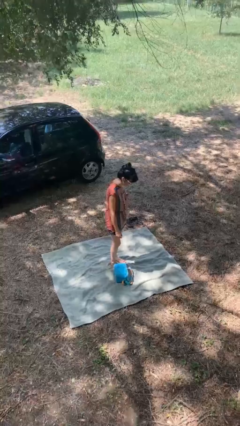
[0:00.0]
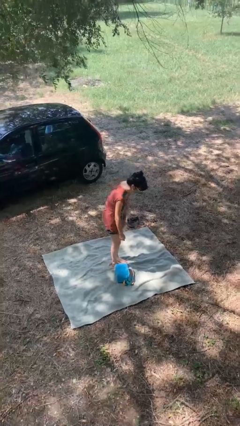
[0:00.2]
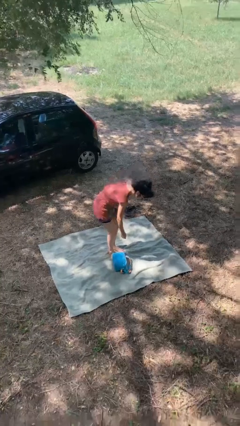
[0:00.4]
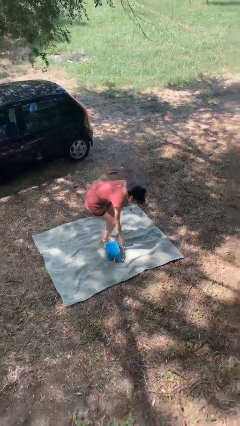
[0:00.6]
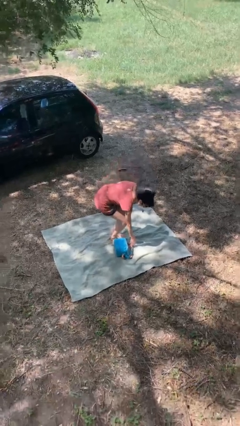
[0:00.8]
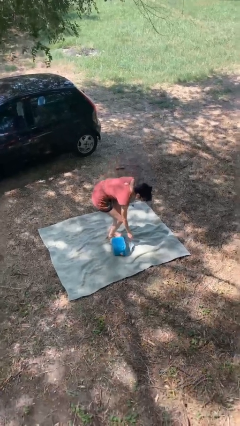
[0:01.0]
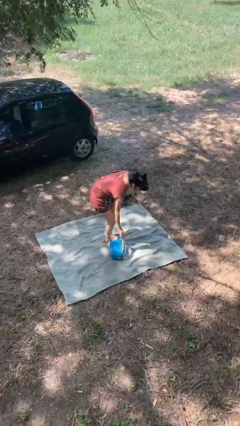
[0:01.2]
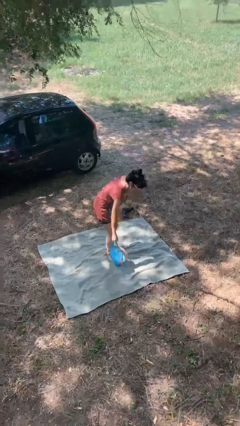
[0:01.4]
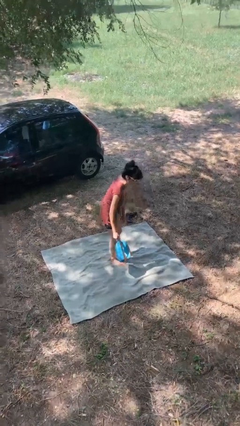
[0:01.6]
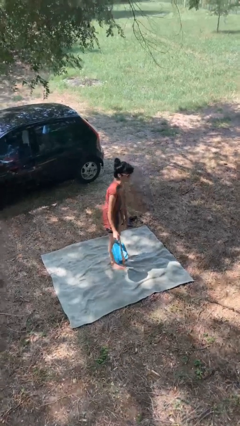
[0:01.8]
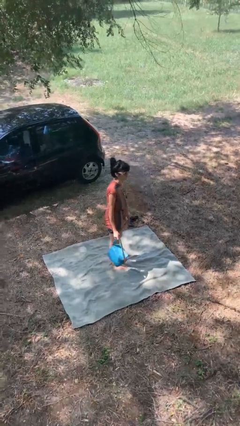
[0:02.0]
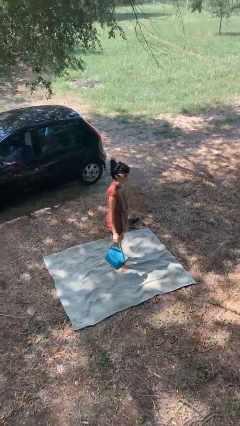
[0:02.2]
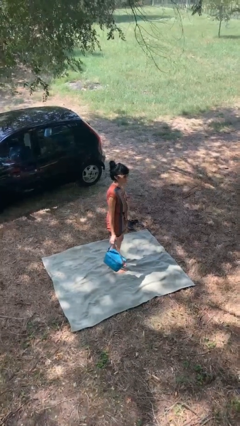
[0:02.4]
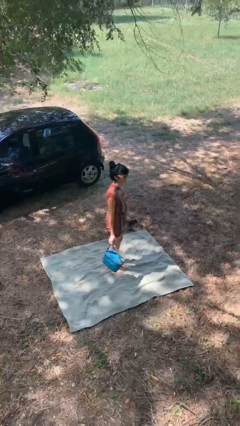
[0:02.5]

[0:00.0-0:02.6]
person picks up object from floor

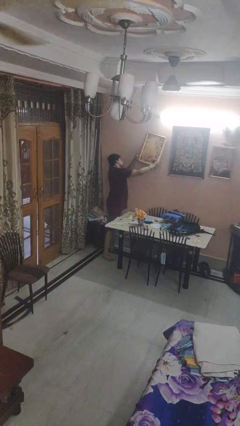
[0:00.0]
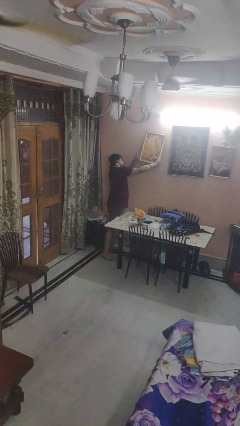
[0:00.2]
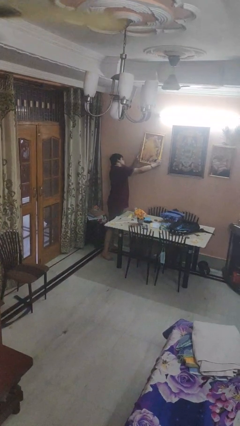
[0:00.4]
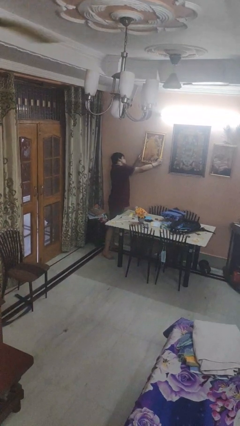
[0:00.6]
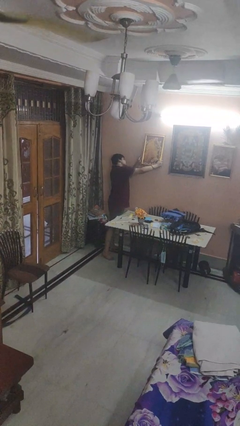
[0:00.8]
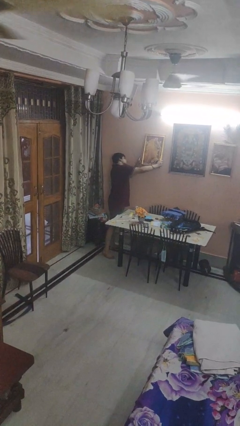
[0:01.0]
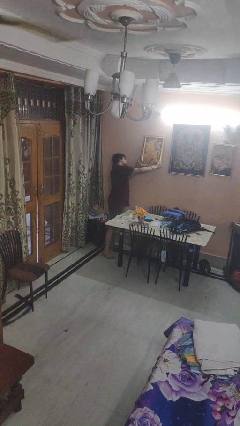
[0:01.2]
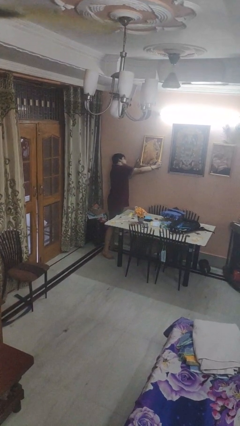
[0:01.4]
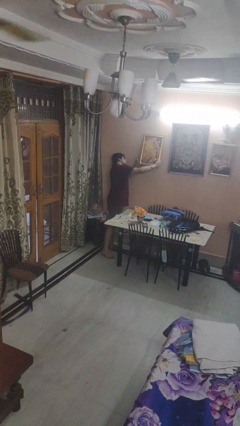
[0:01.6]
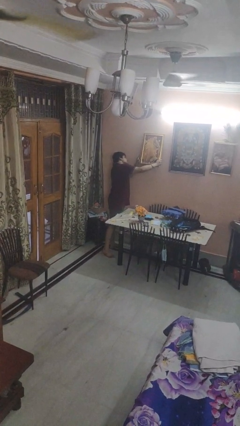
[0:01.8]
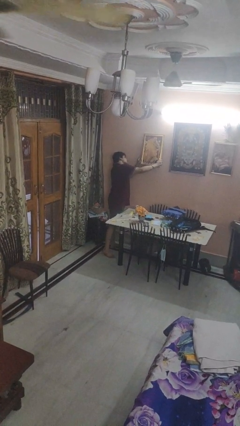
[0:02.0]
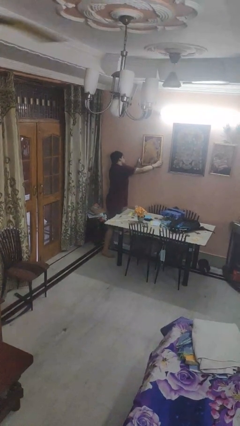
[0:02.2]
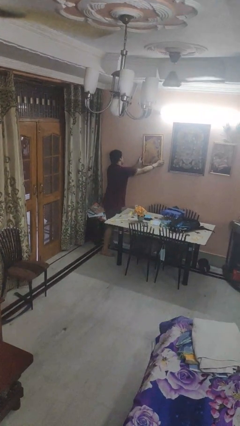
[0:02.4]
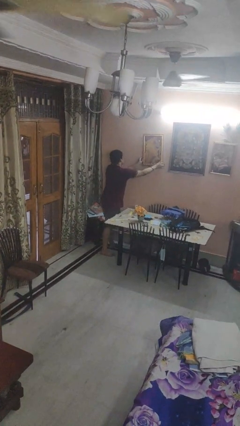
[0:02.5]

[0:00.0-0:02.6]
person puts up picture frame

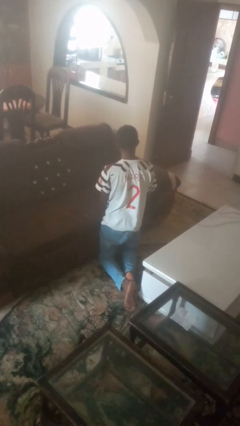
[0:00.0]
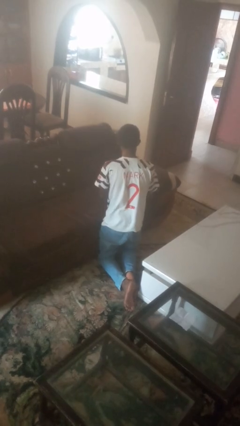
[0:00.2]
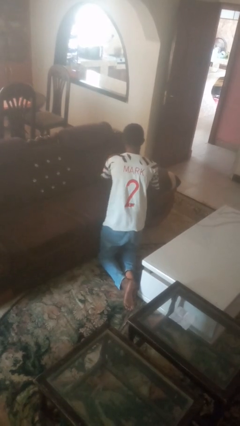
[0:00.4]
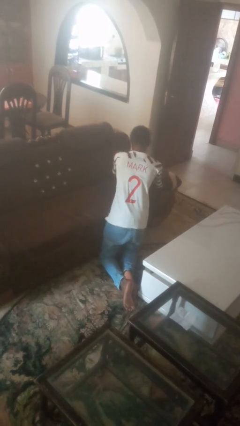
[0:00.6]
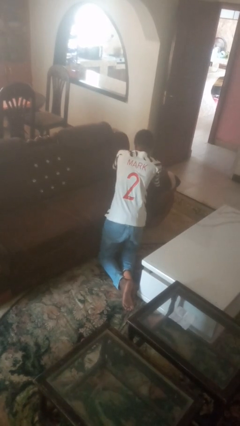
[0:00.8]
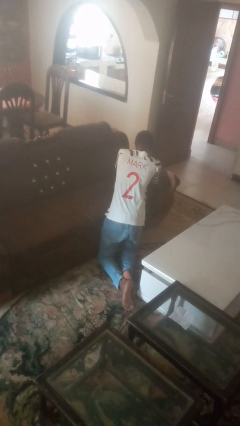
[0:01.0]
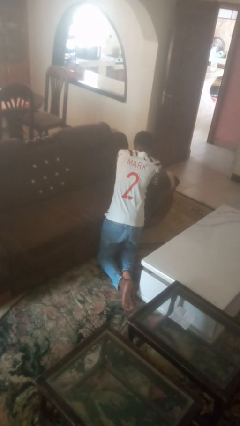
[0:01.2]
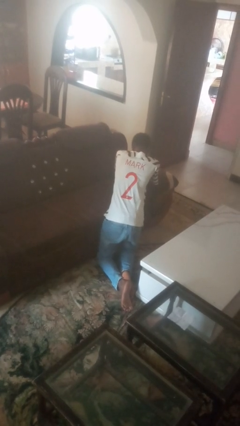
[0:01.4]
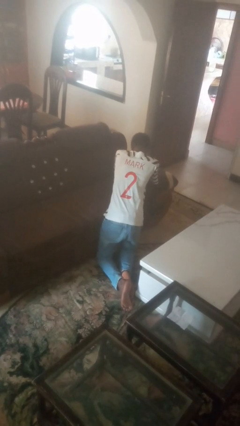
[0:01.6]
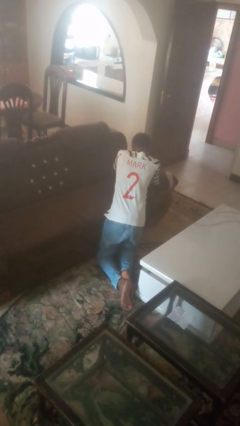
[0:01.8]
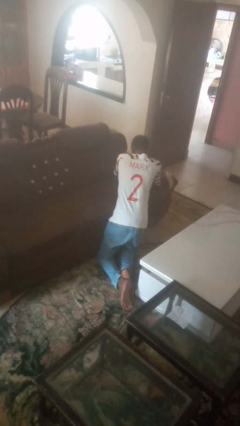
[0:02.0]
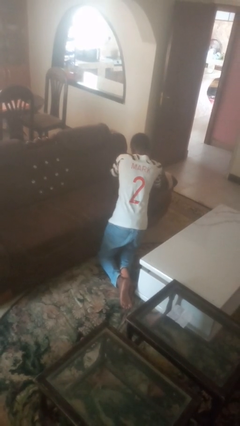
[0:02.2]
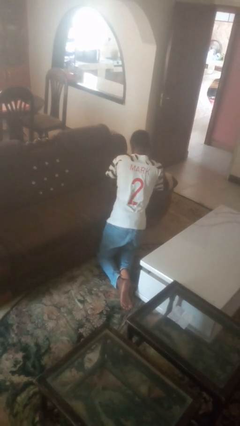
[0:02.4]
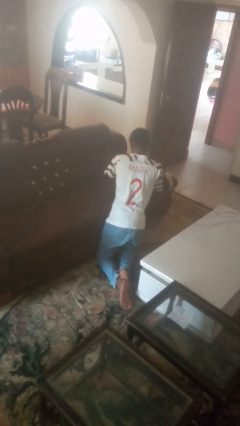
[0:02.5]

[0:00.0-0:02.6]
person searches in couch

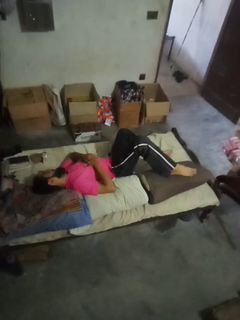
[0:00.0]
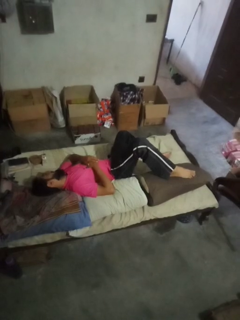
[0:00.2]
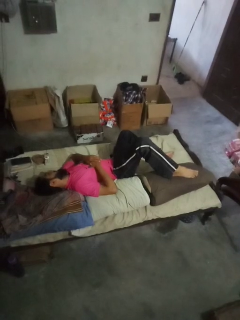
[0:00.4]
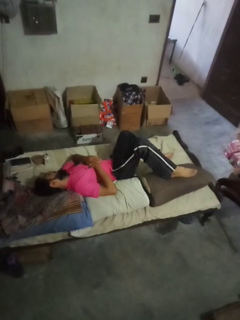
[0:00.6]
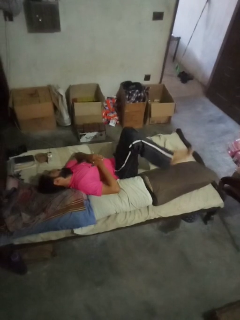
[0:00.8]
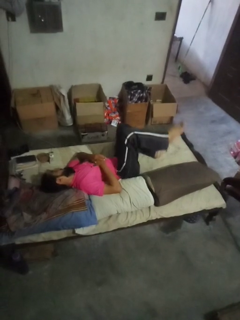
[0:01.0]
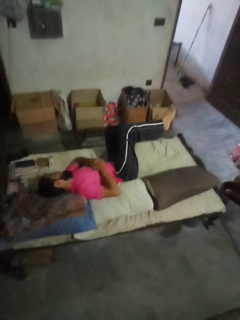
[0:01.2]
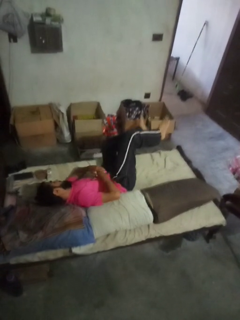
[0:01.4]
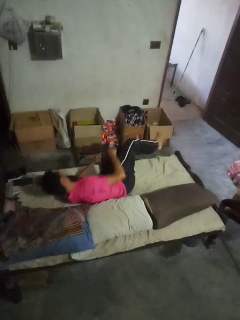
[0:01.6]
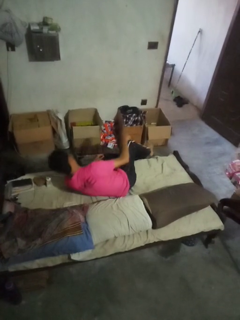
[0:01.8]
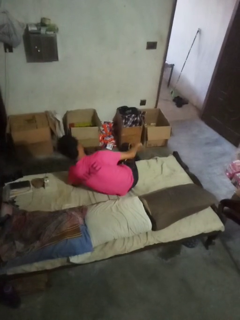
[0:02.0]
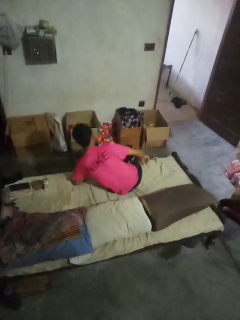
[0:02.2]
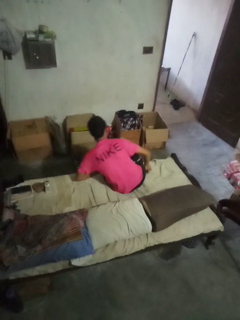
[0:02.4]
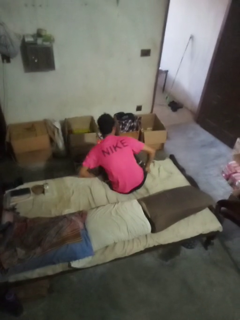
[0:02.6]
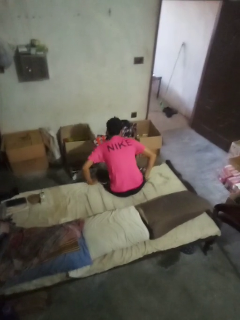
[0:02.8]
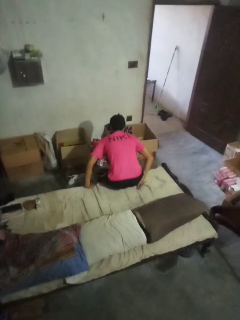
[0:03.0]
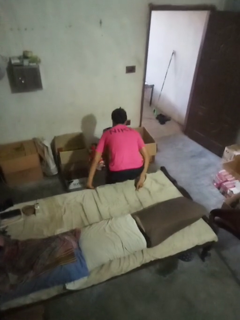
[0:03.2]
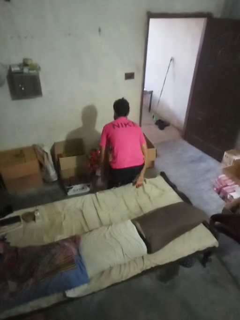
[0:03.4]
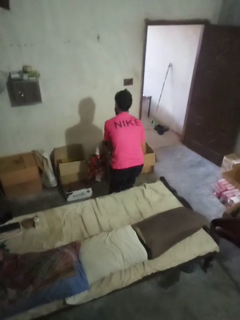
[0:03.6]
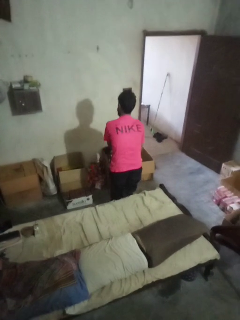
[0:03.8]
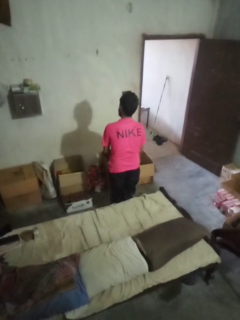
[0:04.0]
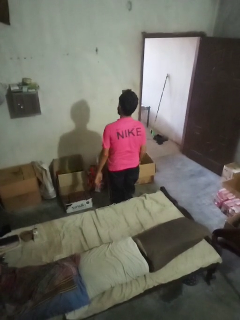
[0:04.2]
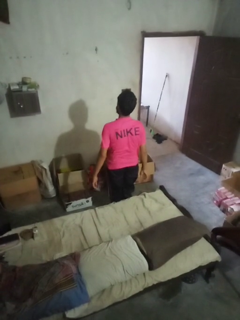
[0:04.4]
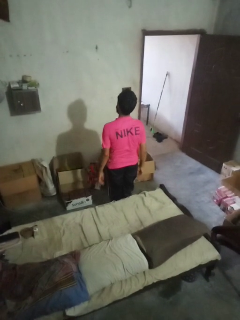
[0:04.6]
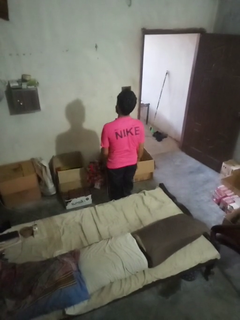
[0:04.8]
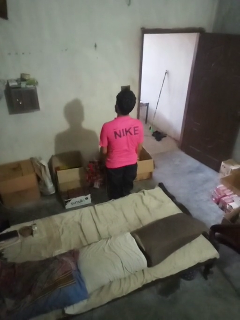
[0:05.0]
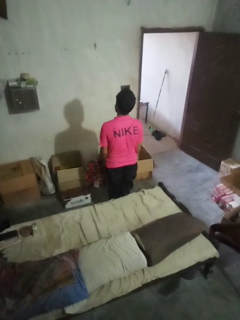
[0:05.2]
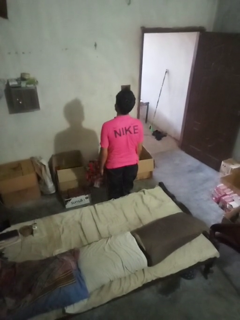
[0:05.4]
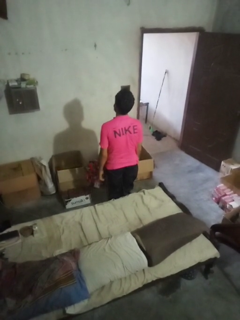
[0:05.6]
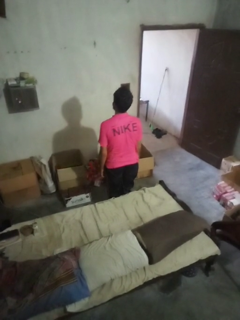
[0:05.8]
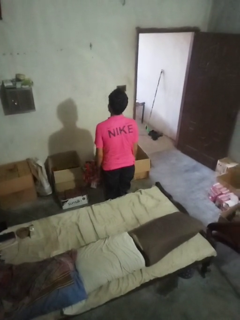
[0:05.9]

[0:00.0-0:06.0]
person stands up

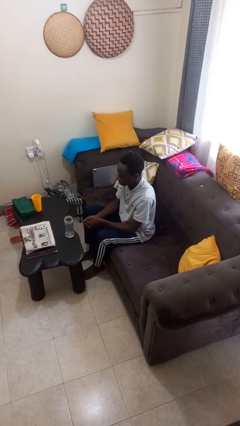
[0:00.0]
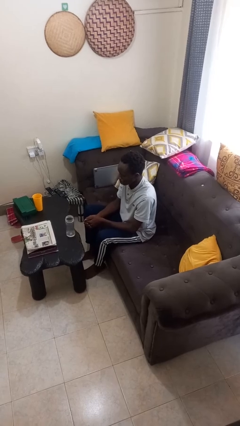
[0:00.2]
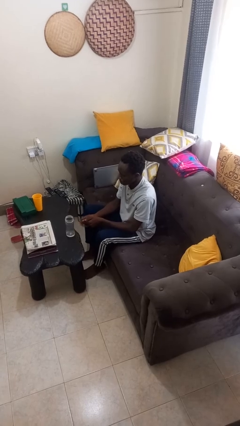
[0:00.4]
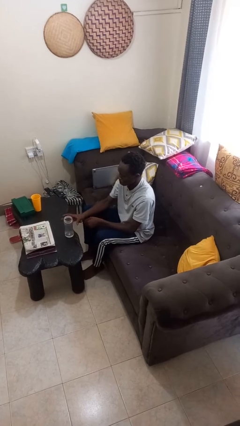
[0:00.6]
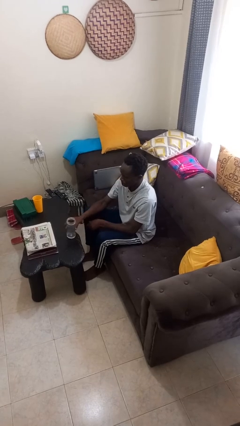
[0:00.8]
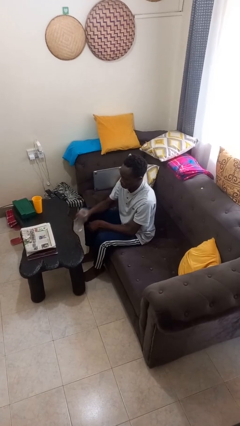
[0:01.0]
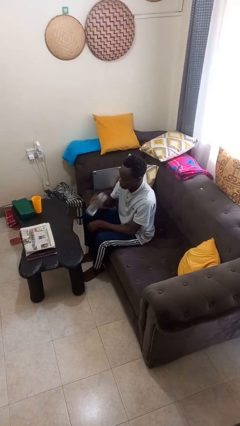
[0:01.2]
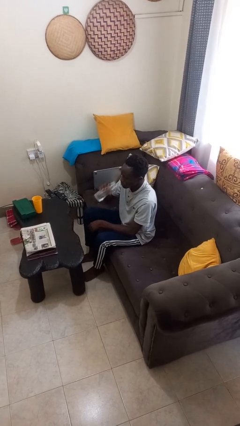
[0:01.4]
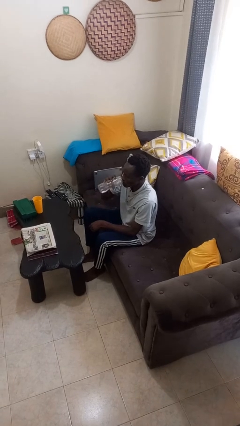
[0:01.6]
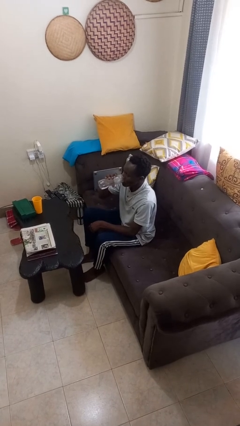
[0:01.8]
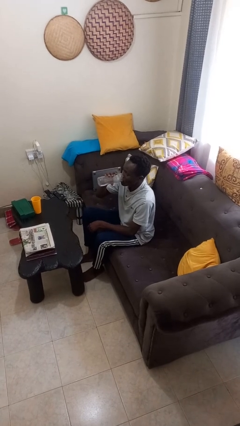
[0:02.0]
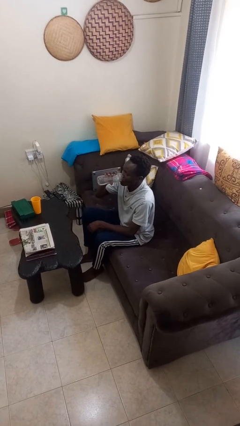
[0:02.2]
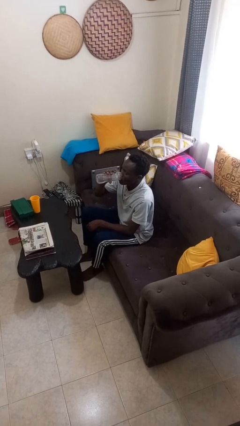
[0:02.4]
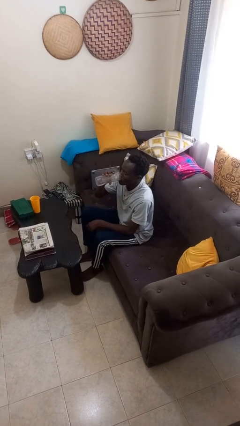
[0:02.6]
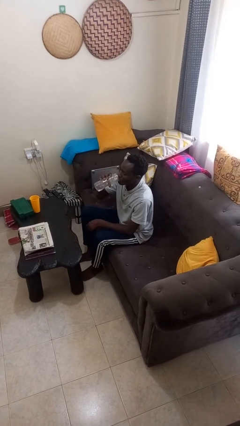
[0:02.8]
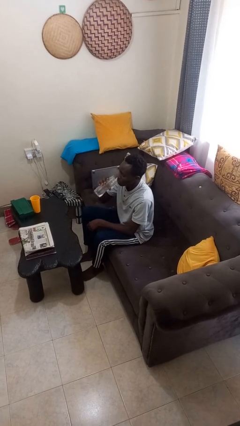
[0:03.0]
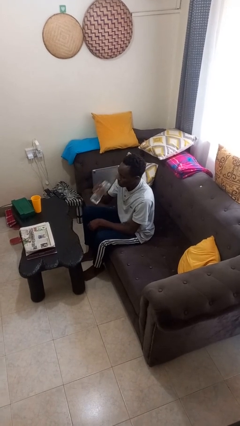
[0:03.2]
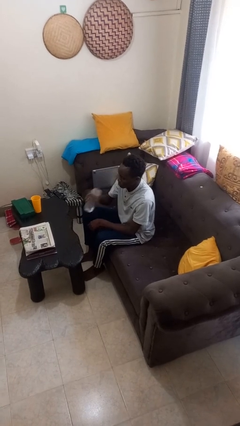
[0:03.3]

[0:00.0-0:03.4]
person drinks from bottle

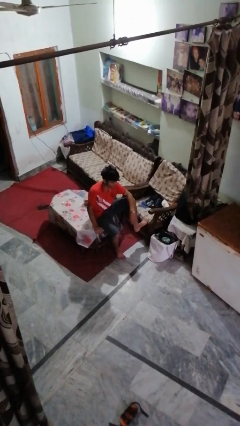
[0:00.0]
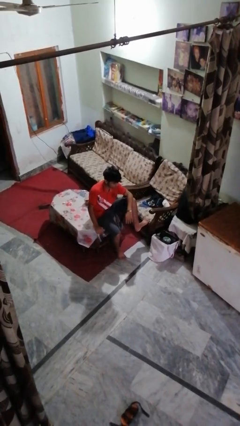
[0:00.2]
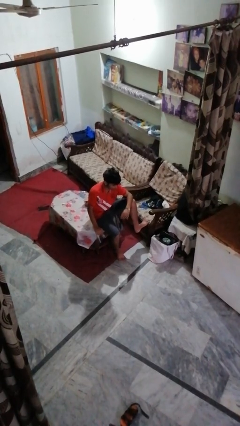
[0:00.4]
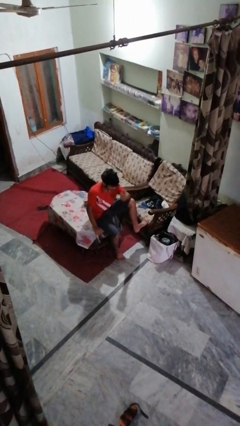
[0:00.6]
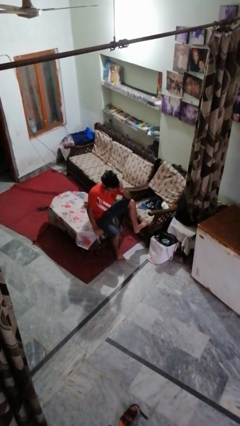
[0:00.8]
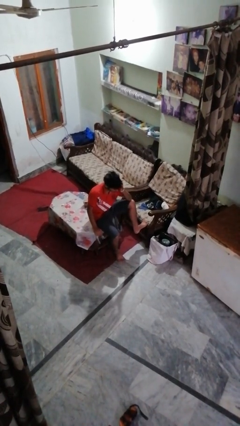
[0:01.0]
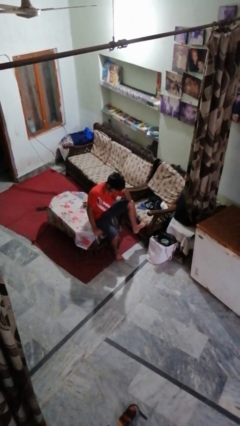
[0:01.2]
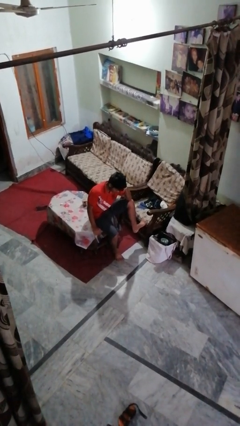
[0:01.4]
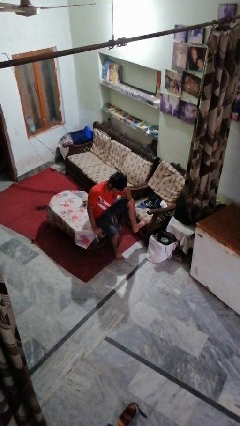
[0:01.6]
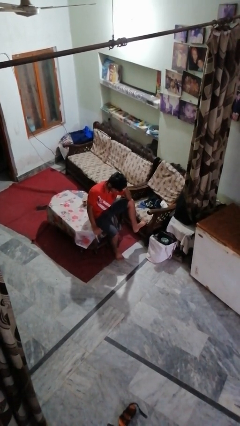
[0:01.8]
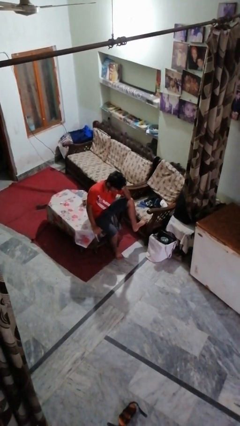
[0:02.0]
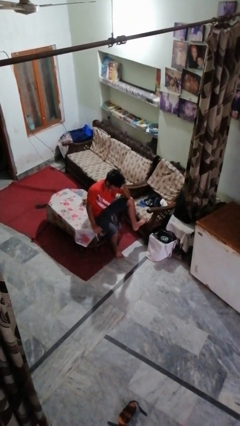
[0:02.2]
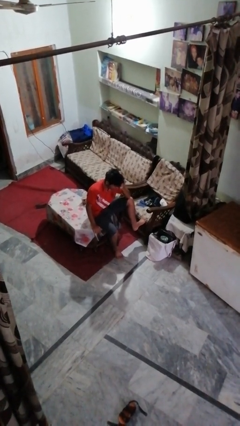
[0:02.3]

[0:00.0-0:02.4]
person strokes hair
